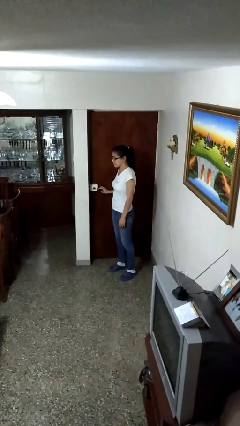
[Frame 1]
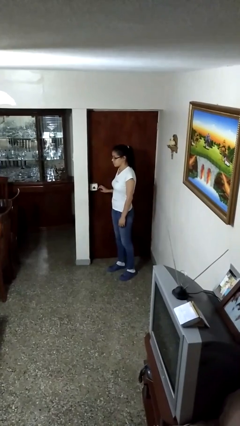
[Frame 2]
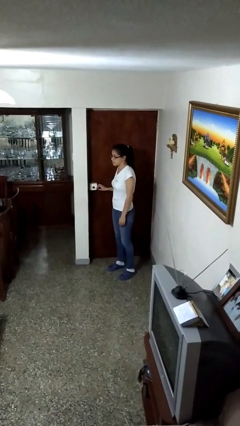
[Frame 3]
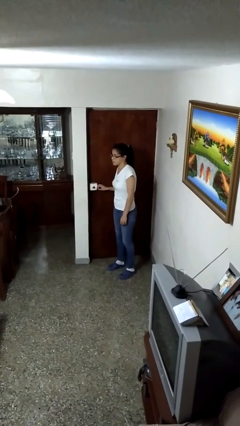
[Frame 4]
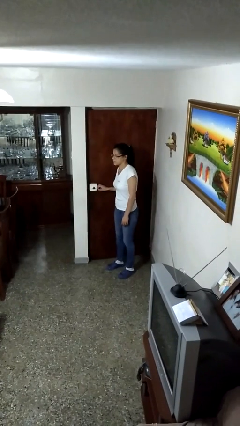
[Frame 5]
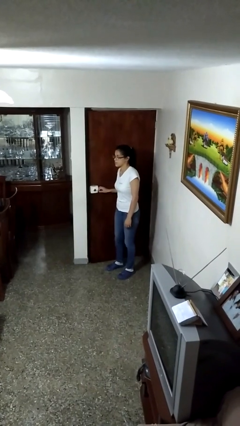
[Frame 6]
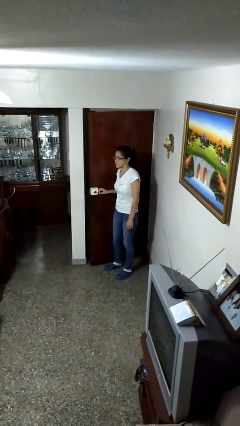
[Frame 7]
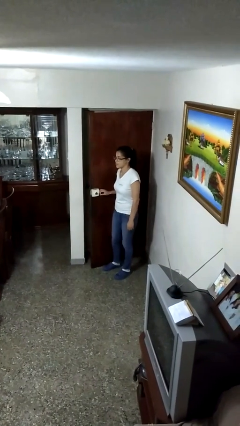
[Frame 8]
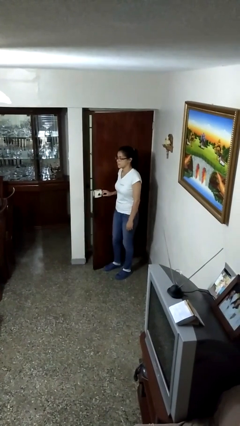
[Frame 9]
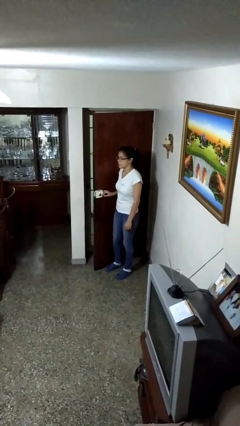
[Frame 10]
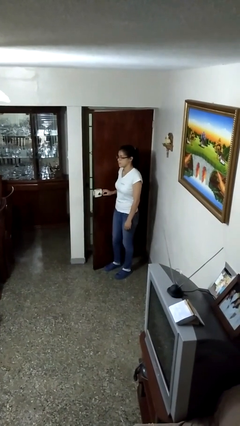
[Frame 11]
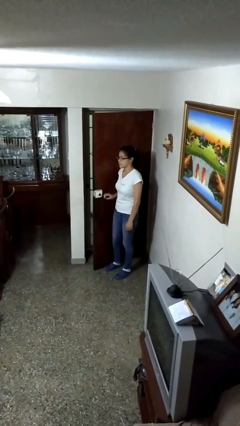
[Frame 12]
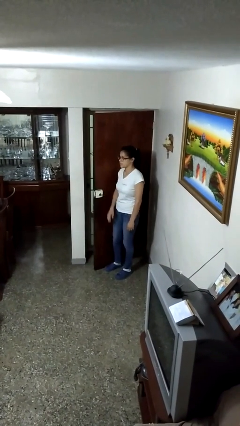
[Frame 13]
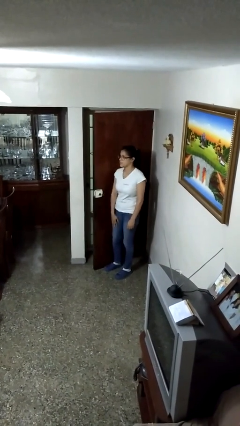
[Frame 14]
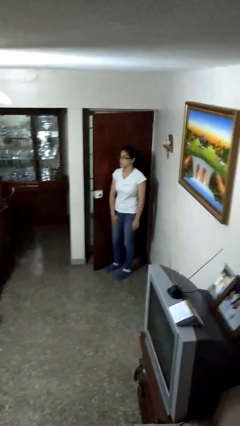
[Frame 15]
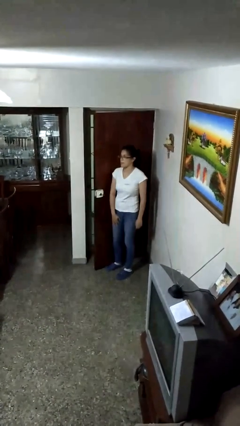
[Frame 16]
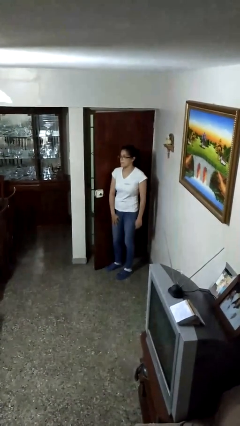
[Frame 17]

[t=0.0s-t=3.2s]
person opens facility door

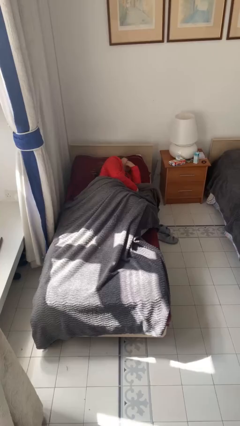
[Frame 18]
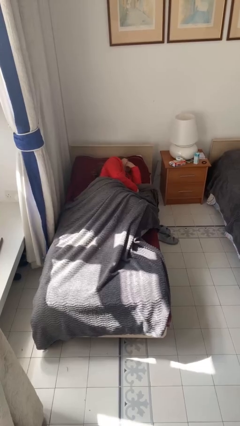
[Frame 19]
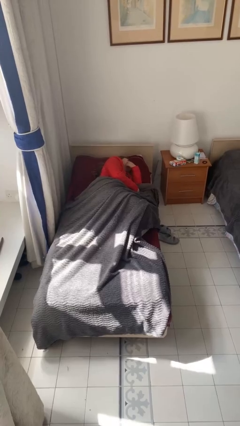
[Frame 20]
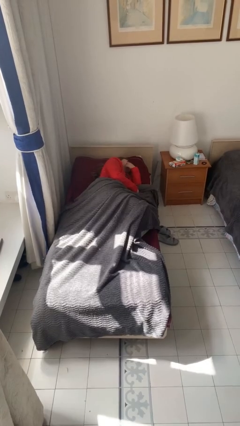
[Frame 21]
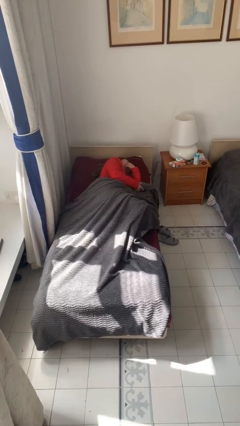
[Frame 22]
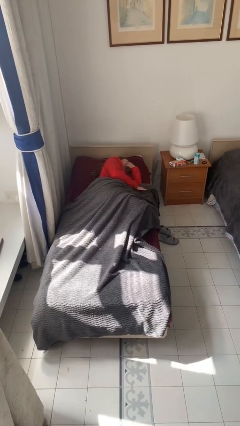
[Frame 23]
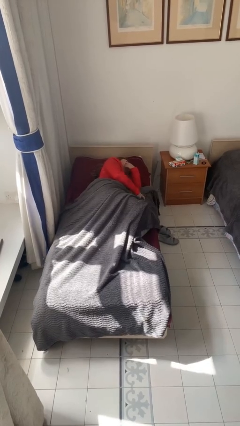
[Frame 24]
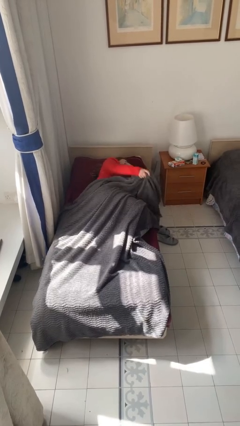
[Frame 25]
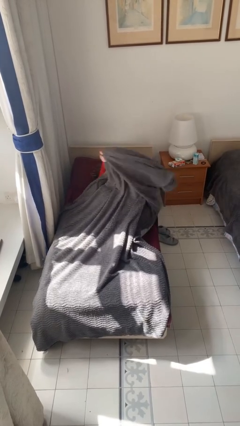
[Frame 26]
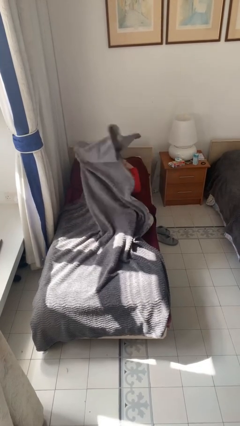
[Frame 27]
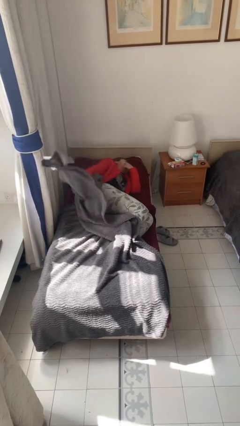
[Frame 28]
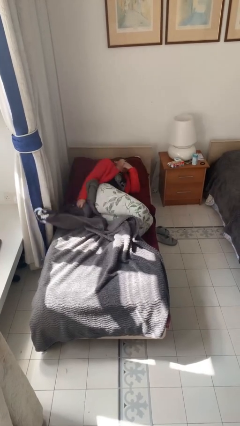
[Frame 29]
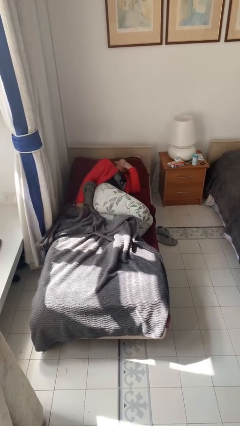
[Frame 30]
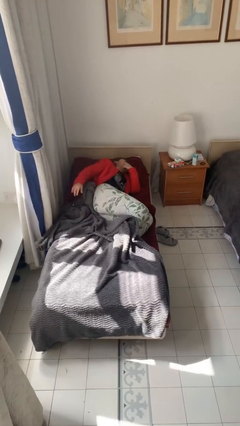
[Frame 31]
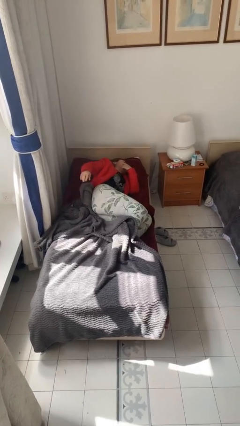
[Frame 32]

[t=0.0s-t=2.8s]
person uncovers with bedsheets

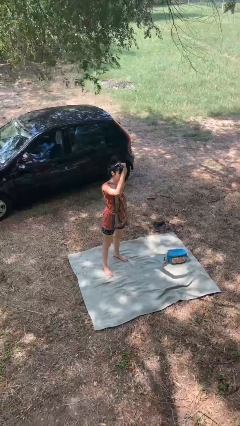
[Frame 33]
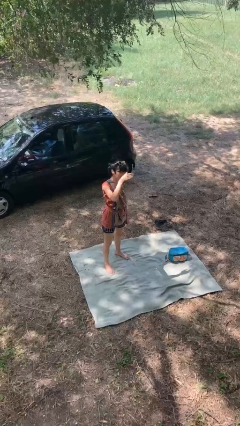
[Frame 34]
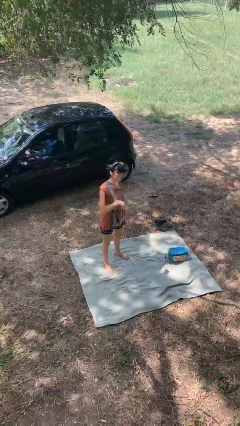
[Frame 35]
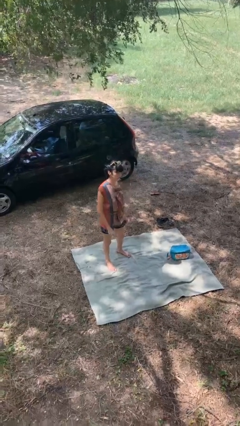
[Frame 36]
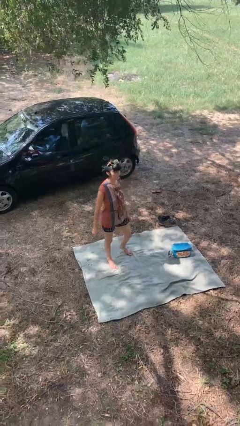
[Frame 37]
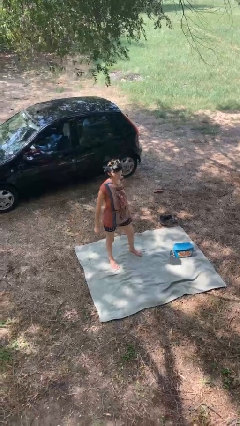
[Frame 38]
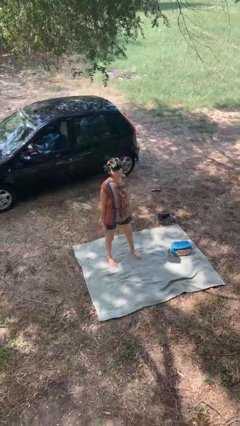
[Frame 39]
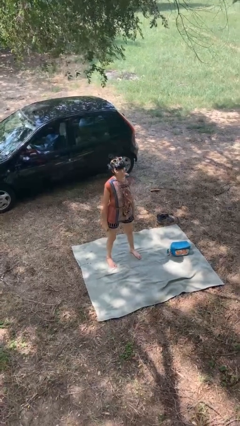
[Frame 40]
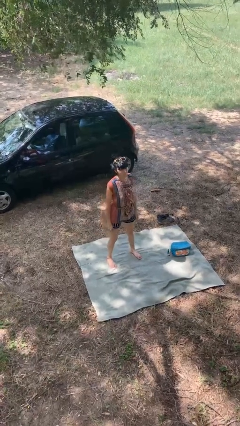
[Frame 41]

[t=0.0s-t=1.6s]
person gestures lower hand

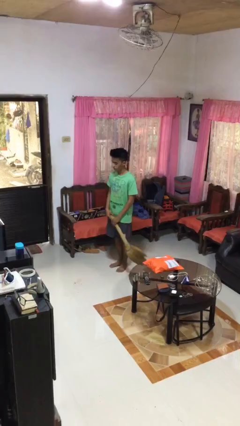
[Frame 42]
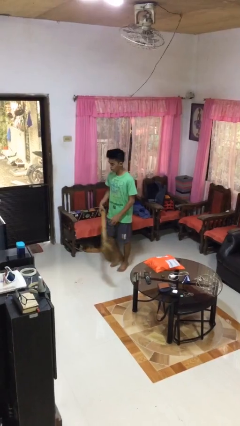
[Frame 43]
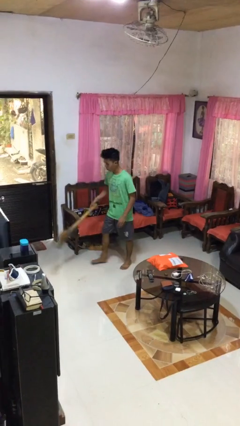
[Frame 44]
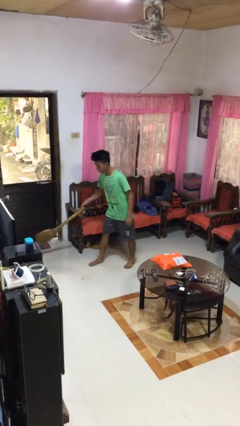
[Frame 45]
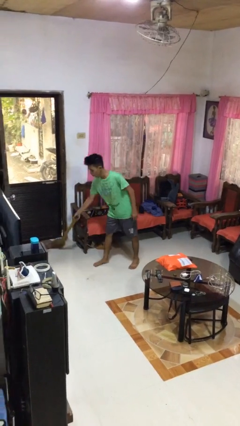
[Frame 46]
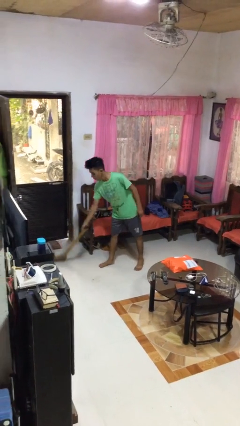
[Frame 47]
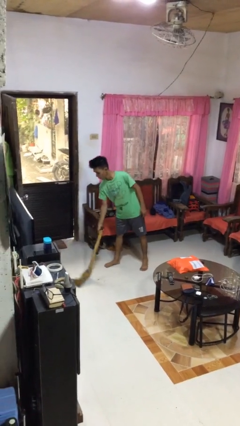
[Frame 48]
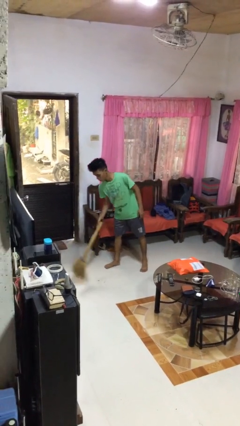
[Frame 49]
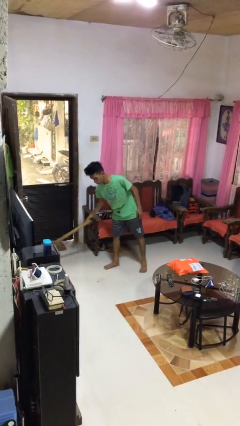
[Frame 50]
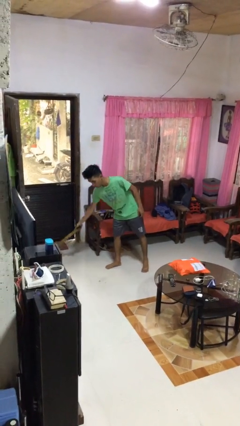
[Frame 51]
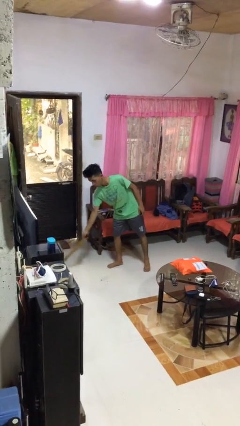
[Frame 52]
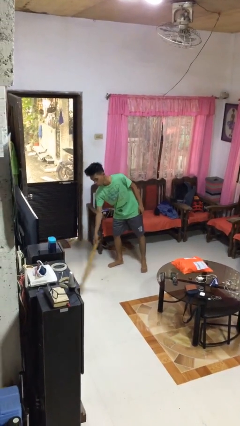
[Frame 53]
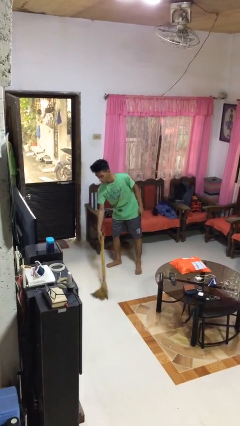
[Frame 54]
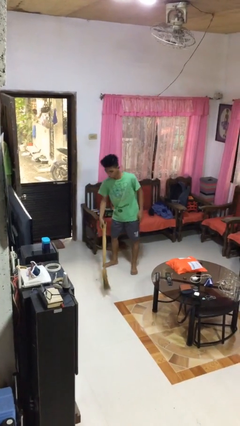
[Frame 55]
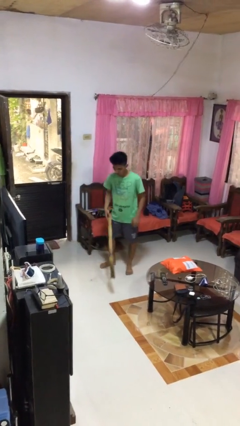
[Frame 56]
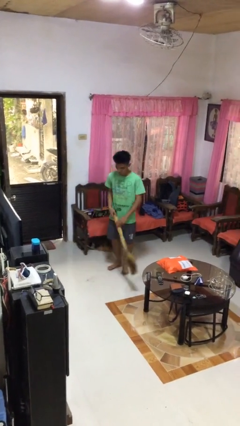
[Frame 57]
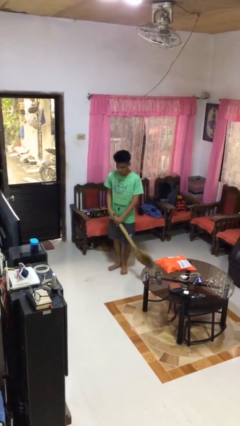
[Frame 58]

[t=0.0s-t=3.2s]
person sweeps floor

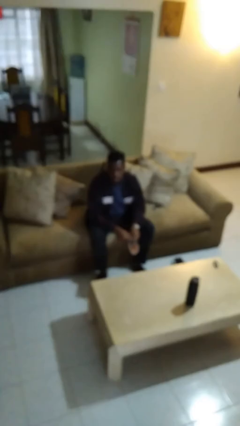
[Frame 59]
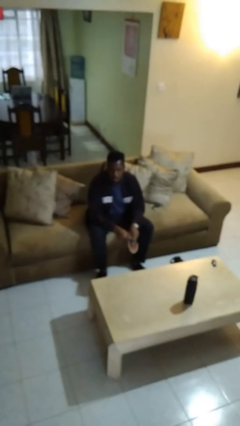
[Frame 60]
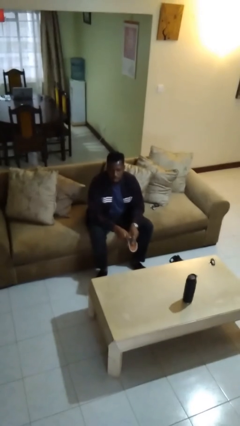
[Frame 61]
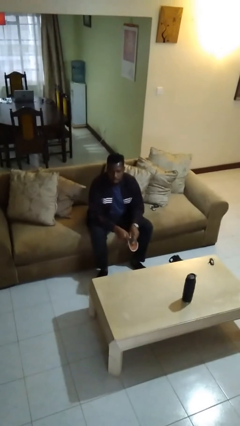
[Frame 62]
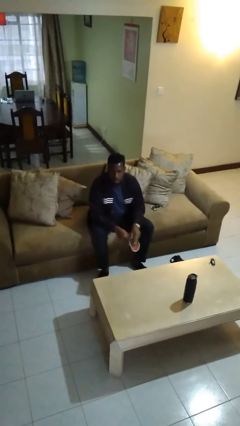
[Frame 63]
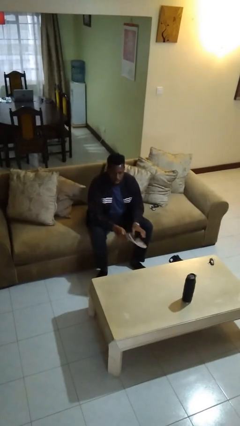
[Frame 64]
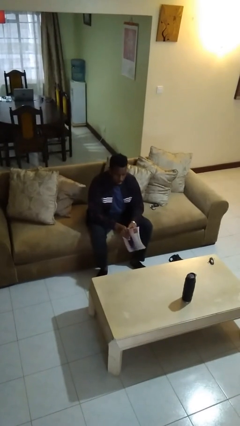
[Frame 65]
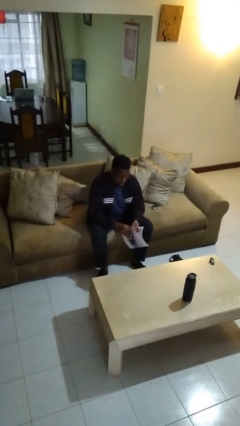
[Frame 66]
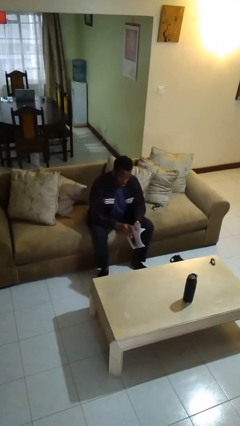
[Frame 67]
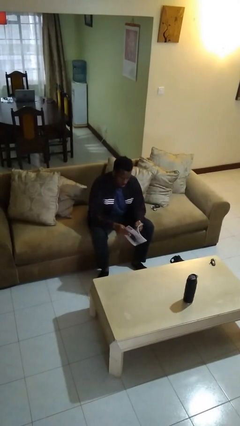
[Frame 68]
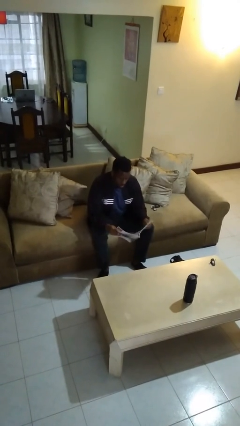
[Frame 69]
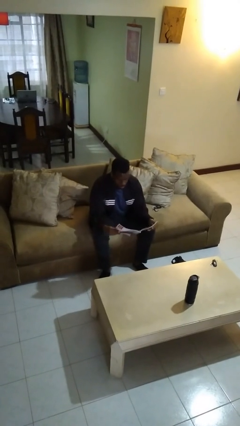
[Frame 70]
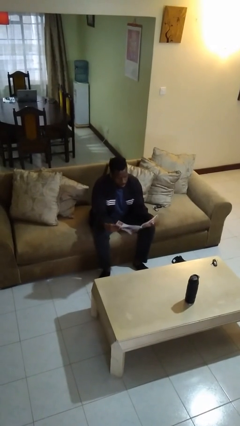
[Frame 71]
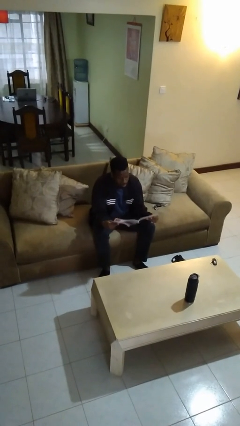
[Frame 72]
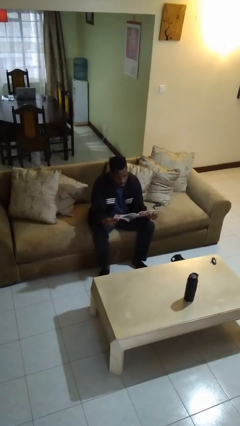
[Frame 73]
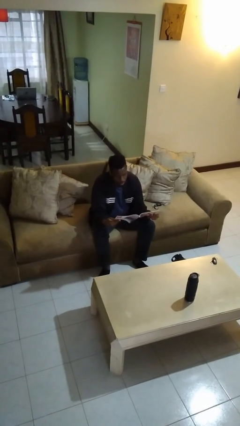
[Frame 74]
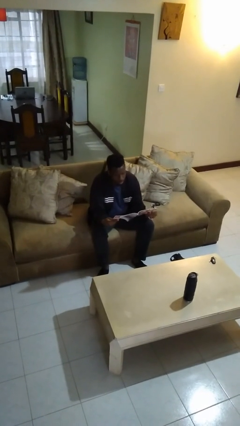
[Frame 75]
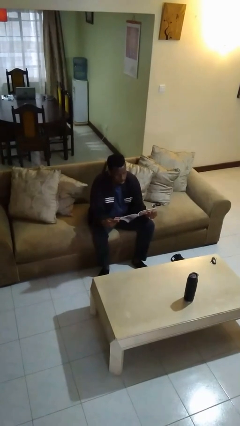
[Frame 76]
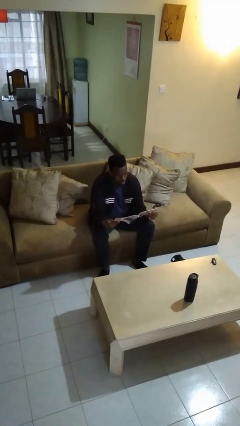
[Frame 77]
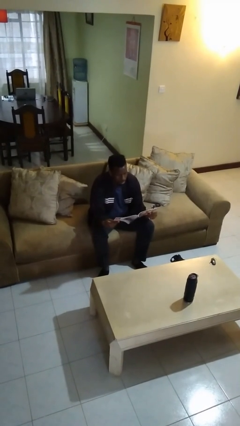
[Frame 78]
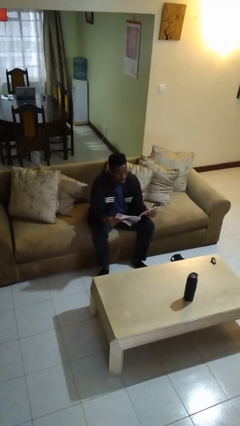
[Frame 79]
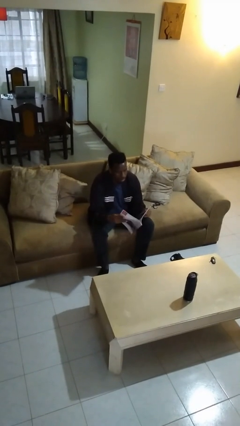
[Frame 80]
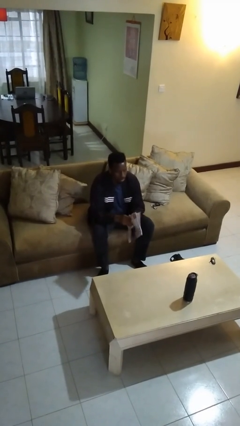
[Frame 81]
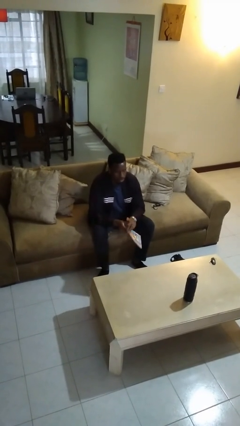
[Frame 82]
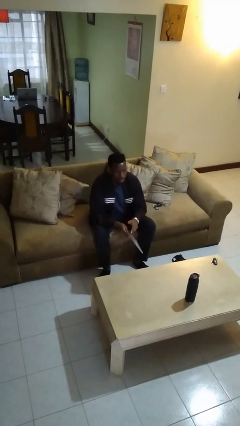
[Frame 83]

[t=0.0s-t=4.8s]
person reads magazine

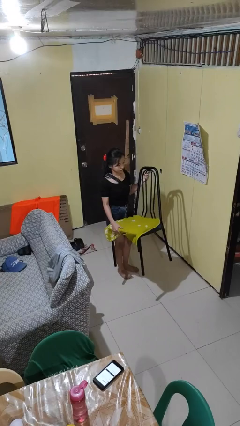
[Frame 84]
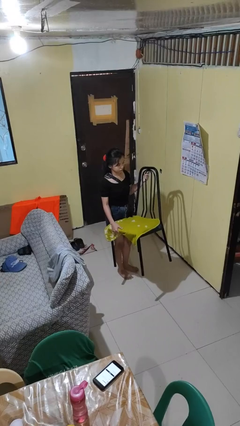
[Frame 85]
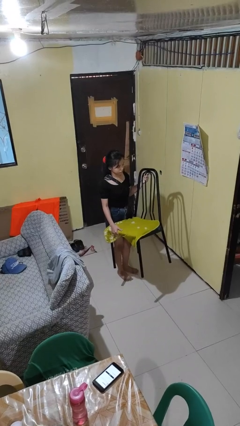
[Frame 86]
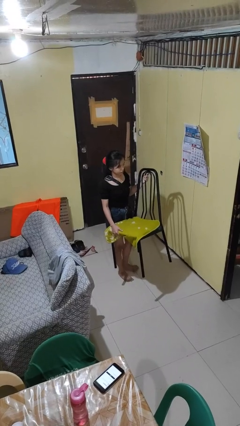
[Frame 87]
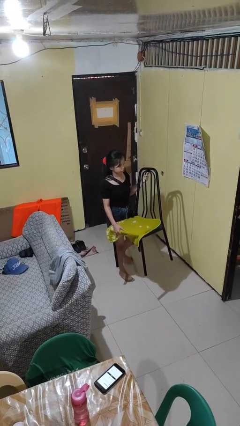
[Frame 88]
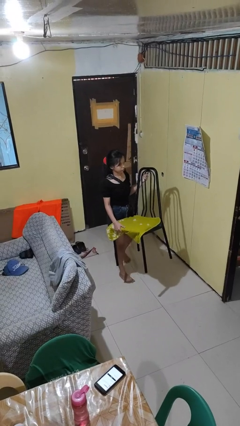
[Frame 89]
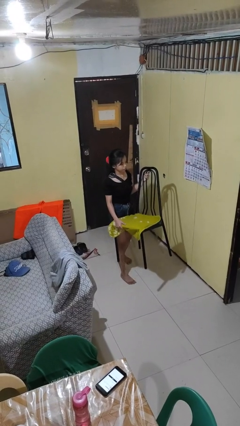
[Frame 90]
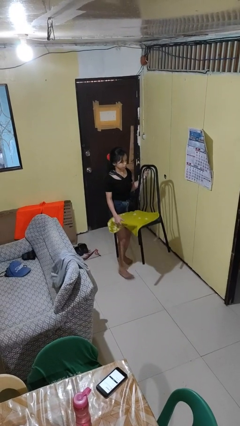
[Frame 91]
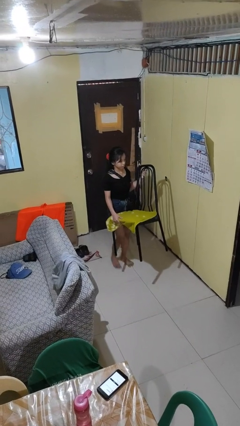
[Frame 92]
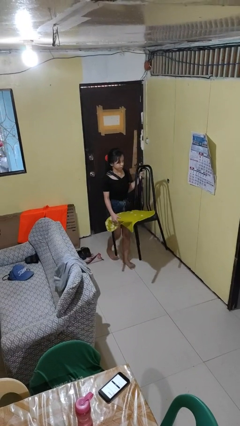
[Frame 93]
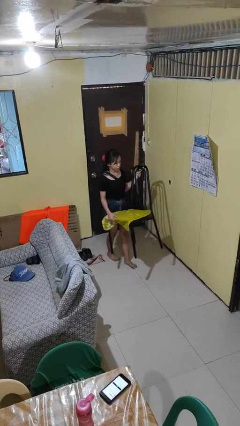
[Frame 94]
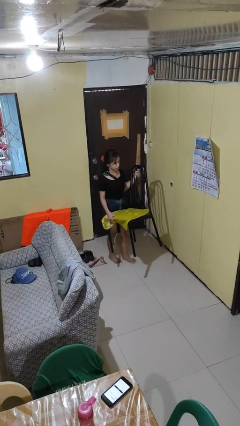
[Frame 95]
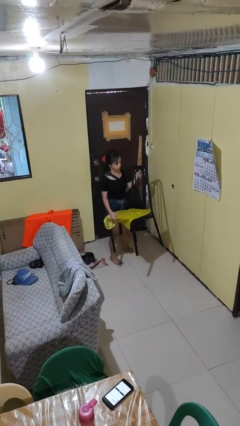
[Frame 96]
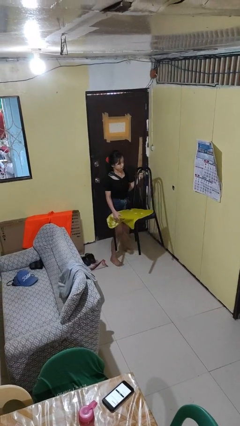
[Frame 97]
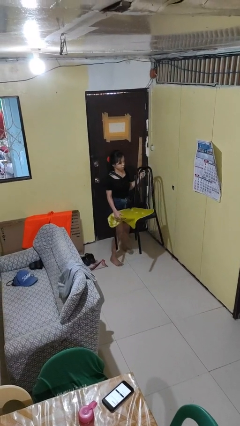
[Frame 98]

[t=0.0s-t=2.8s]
person carries furniture
